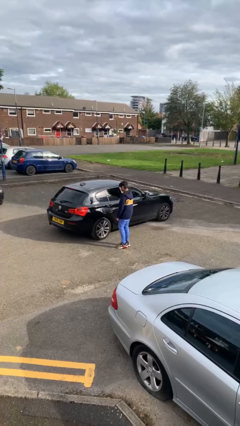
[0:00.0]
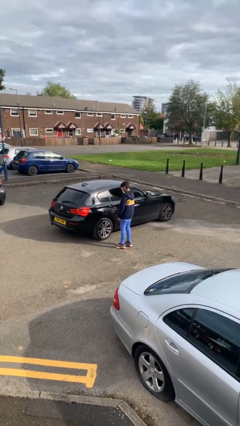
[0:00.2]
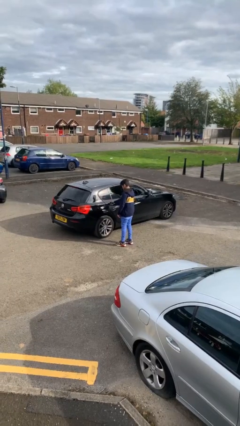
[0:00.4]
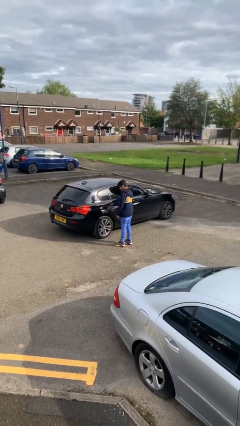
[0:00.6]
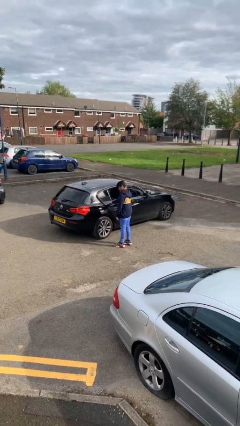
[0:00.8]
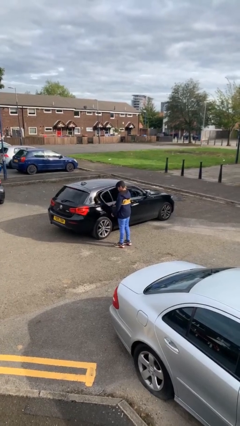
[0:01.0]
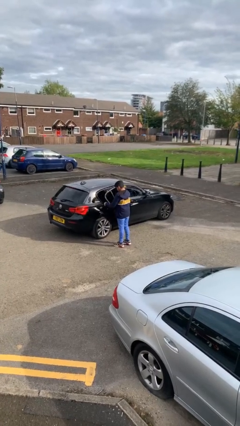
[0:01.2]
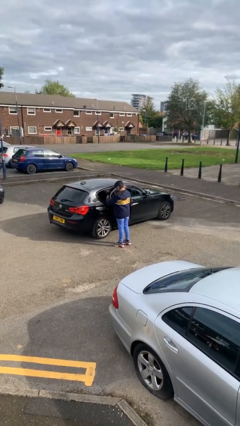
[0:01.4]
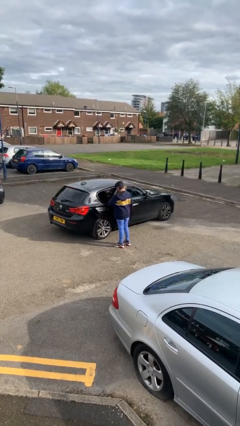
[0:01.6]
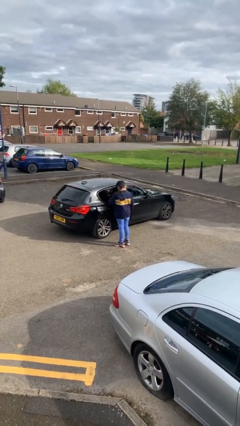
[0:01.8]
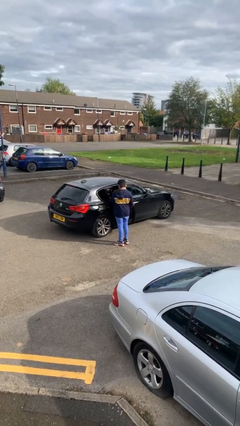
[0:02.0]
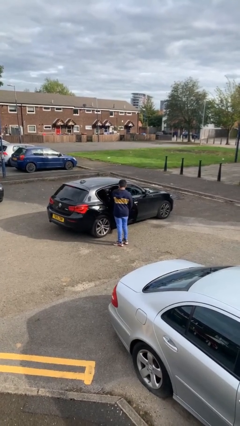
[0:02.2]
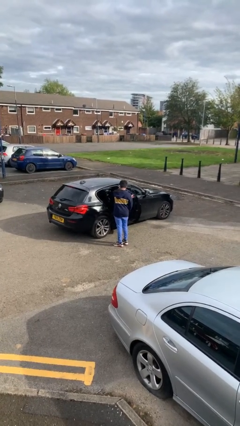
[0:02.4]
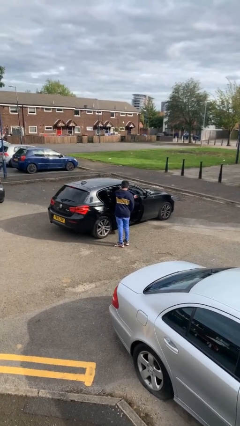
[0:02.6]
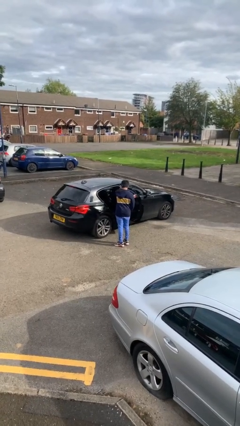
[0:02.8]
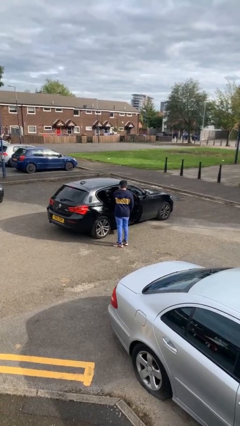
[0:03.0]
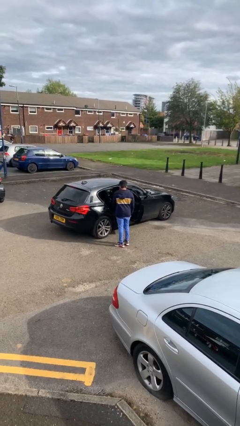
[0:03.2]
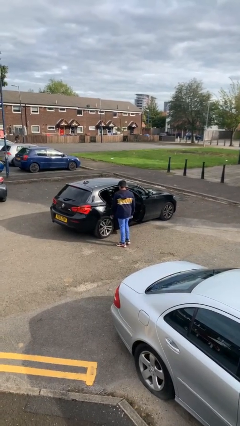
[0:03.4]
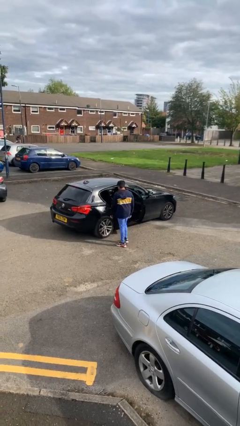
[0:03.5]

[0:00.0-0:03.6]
person opens car door

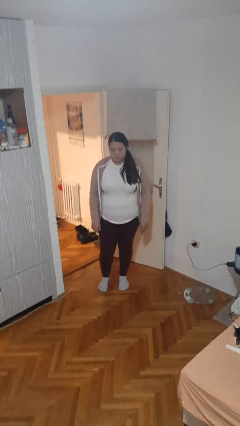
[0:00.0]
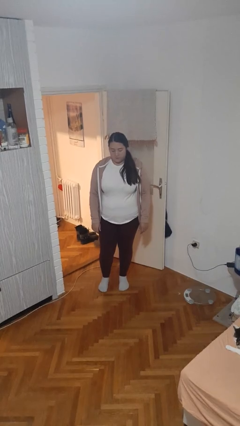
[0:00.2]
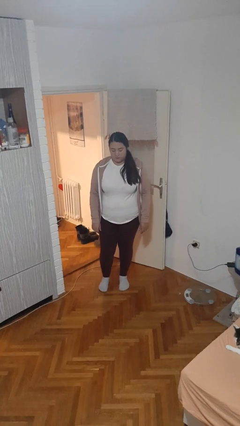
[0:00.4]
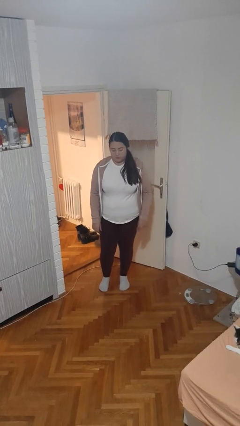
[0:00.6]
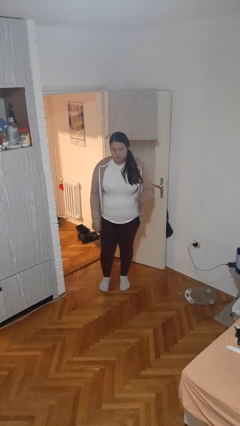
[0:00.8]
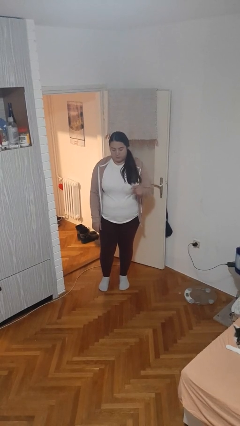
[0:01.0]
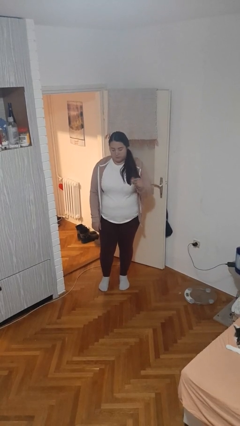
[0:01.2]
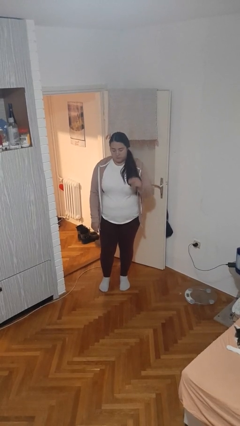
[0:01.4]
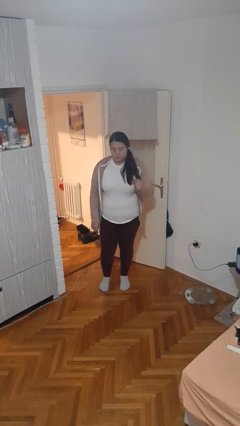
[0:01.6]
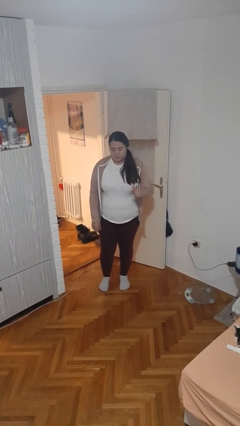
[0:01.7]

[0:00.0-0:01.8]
person snaps fingers

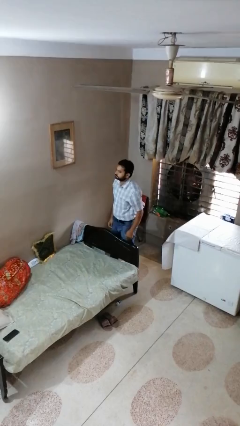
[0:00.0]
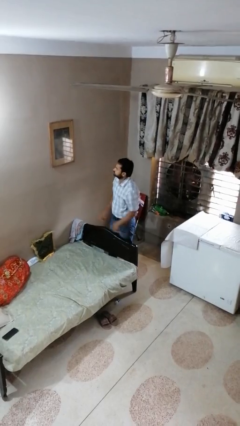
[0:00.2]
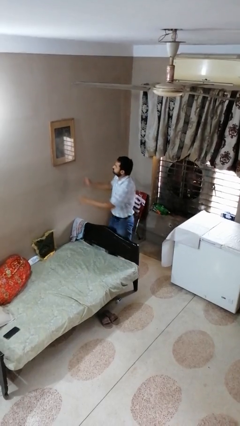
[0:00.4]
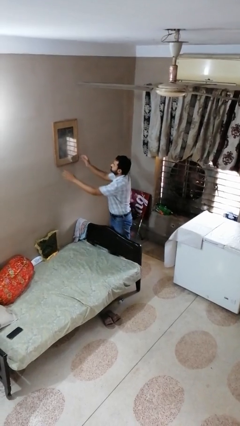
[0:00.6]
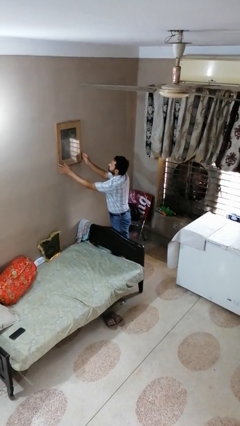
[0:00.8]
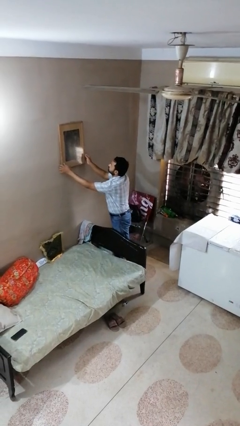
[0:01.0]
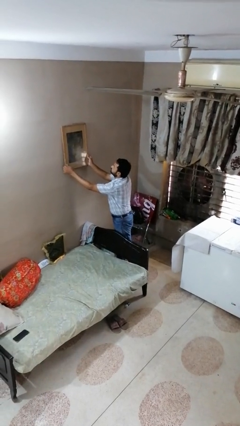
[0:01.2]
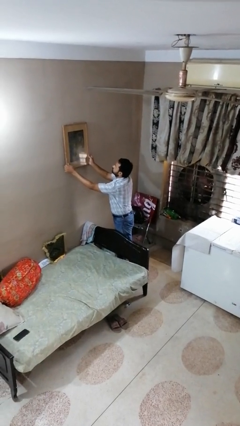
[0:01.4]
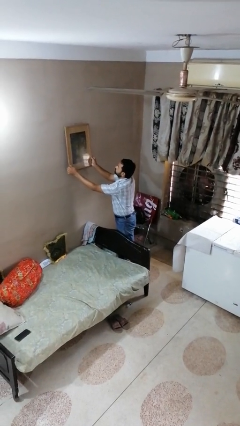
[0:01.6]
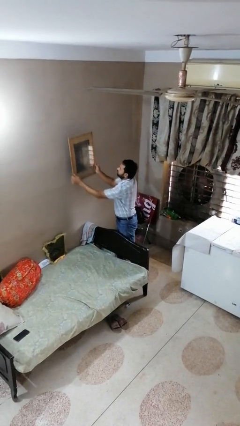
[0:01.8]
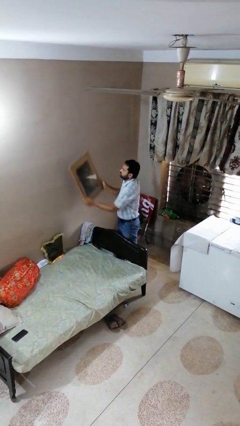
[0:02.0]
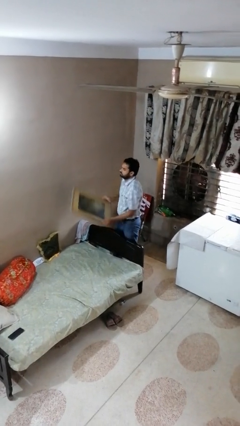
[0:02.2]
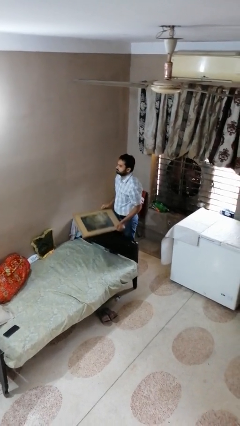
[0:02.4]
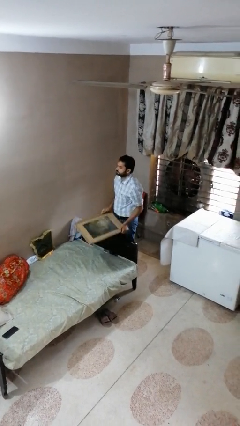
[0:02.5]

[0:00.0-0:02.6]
person takes down picture frame

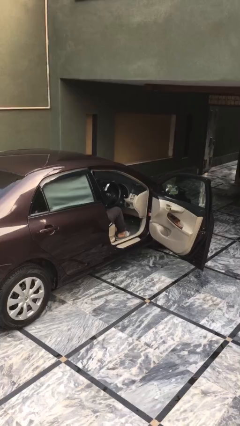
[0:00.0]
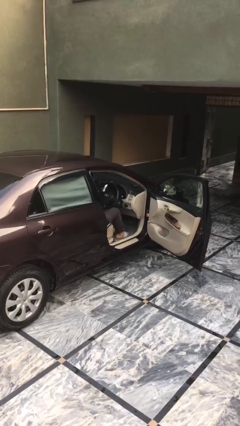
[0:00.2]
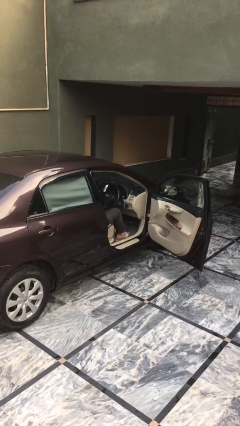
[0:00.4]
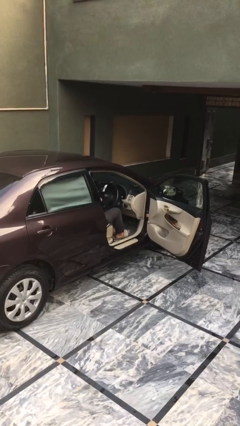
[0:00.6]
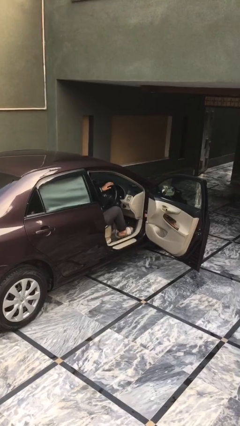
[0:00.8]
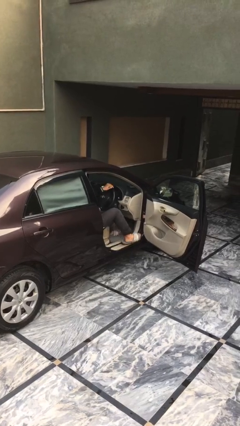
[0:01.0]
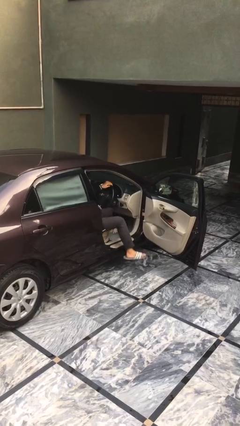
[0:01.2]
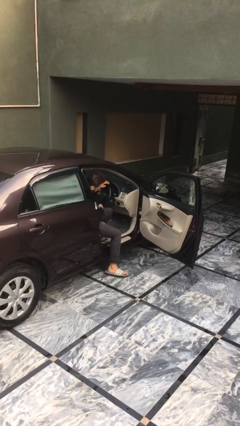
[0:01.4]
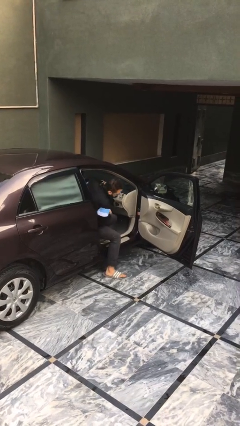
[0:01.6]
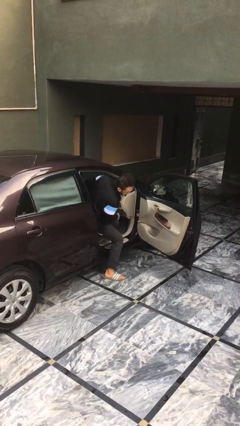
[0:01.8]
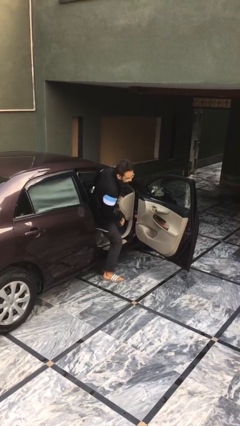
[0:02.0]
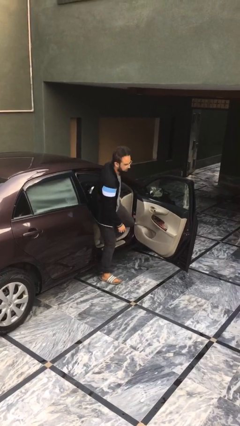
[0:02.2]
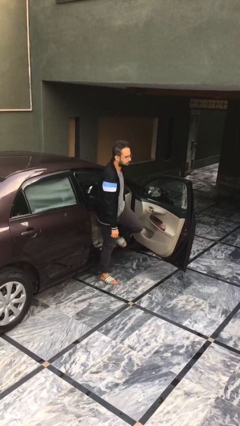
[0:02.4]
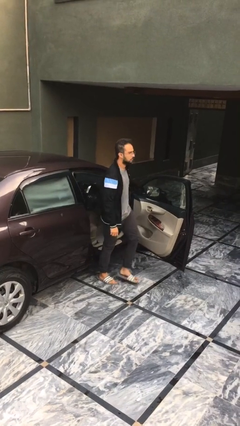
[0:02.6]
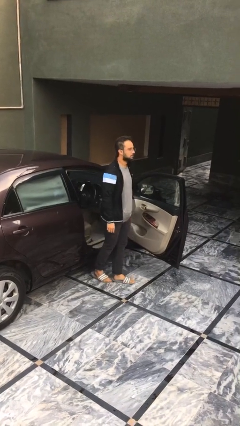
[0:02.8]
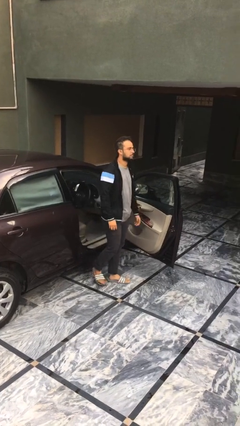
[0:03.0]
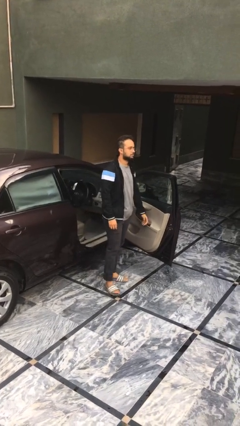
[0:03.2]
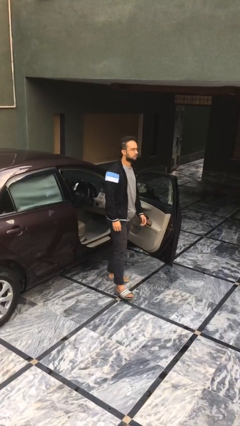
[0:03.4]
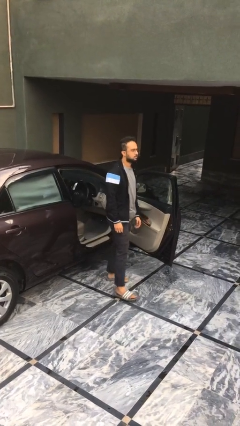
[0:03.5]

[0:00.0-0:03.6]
person exits car

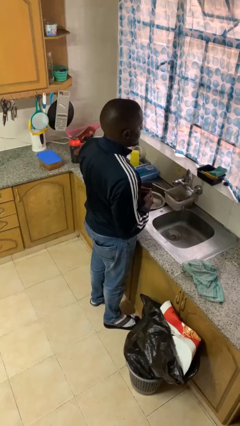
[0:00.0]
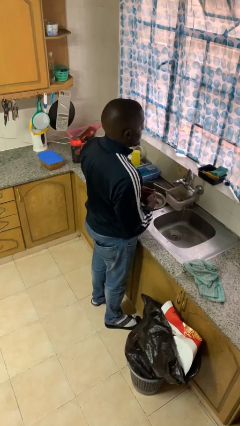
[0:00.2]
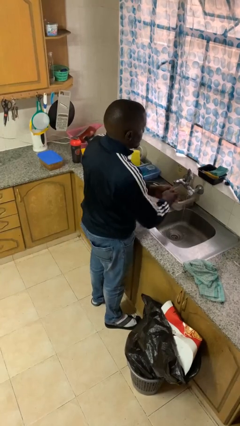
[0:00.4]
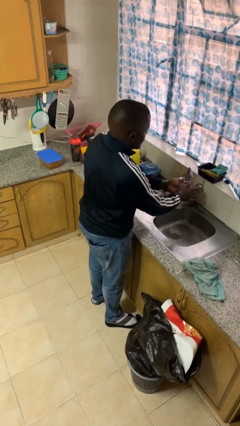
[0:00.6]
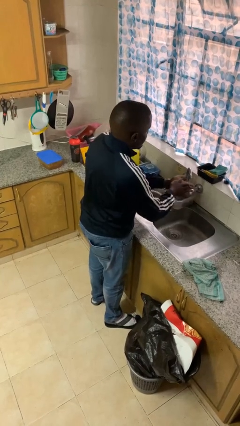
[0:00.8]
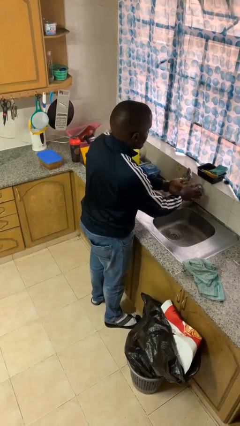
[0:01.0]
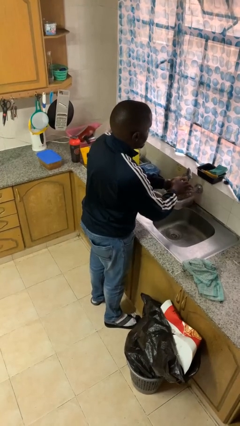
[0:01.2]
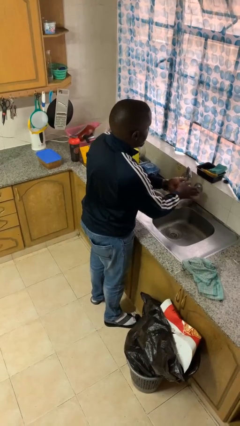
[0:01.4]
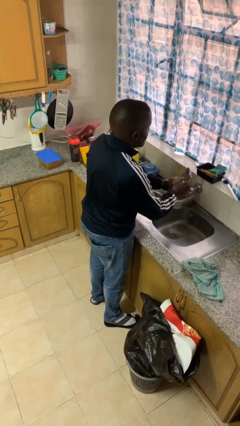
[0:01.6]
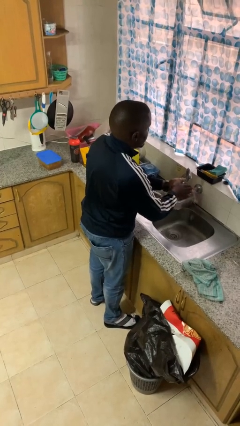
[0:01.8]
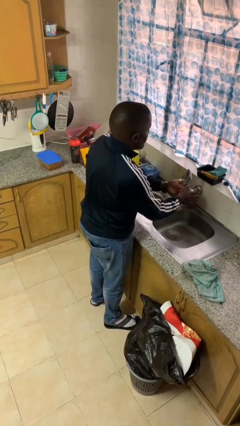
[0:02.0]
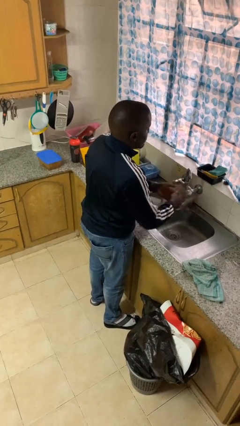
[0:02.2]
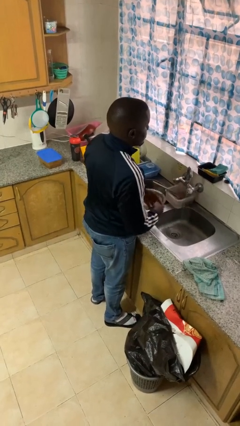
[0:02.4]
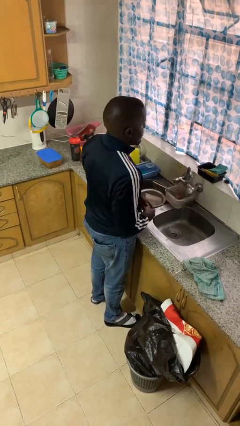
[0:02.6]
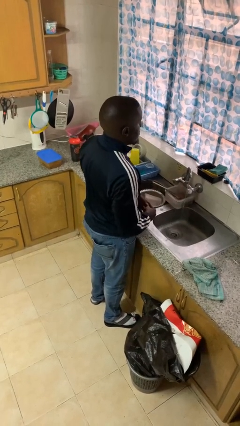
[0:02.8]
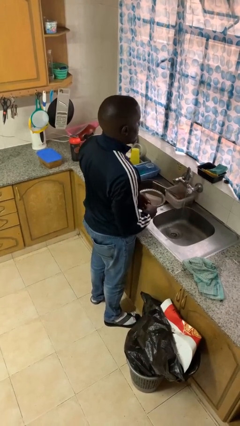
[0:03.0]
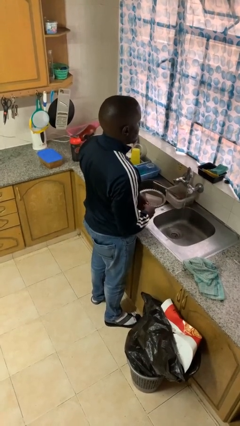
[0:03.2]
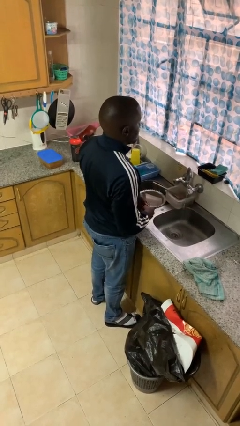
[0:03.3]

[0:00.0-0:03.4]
person washes hands

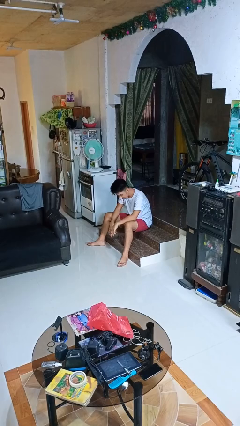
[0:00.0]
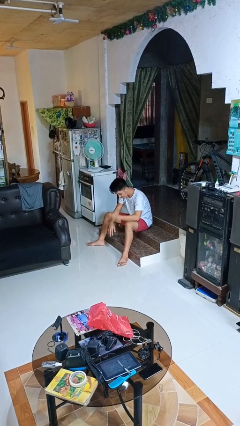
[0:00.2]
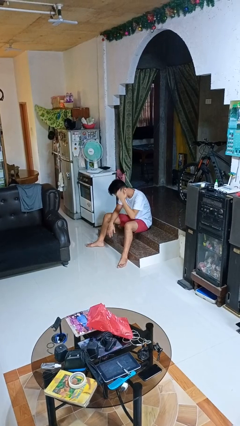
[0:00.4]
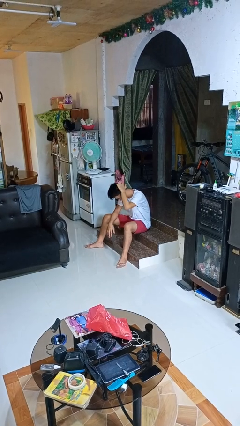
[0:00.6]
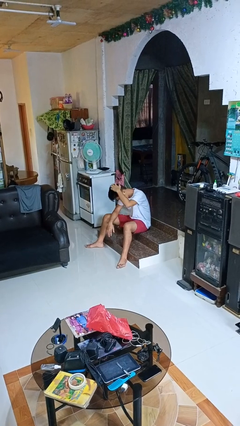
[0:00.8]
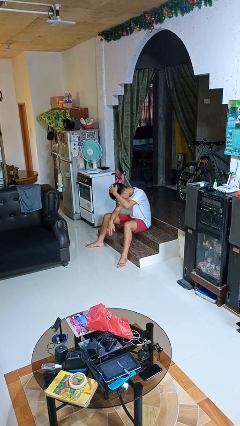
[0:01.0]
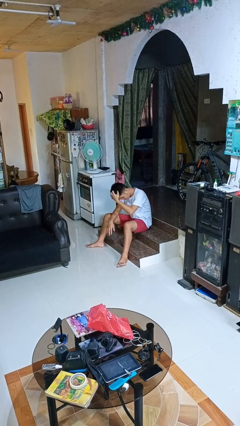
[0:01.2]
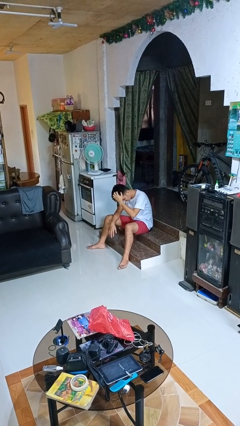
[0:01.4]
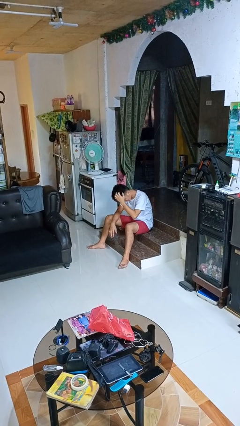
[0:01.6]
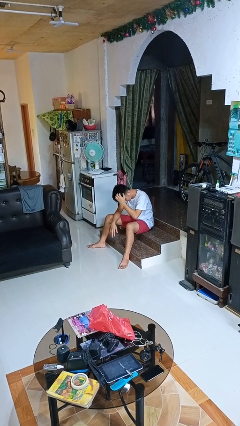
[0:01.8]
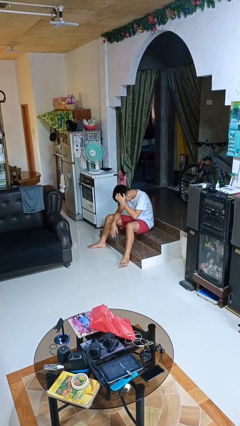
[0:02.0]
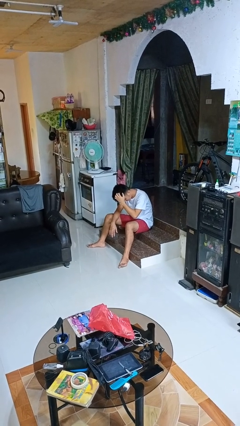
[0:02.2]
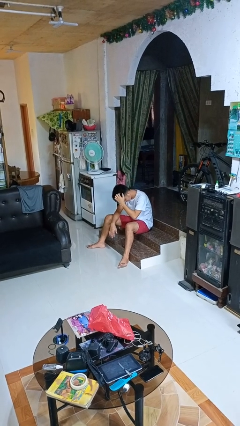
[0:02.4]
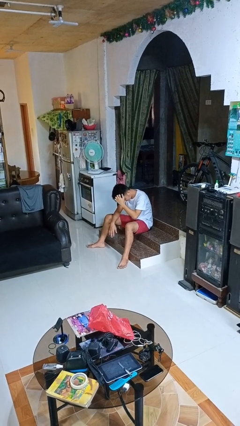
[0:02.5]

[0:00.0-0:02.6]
person scratches face

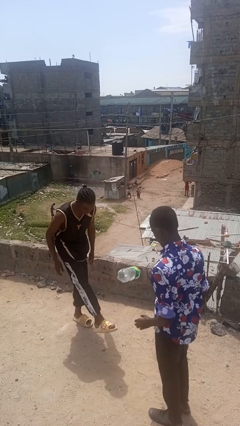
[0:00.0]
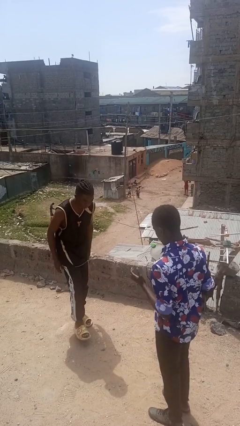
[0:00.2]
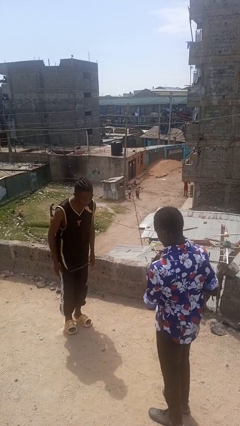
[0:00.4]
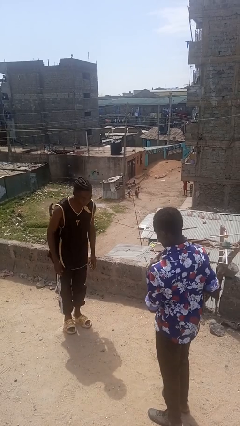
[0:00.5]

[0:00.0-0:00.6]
person kicks object to person
